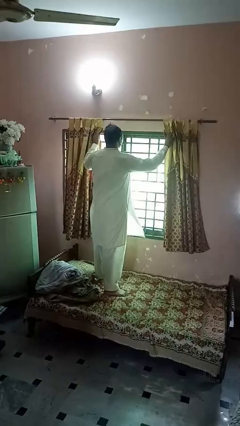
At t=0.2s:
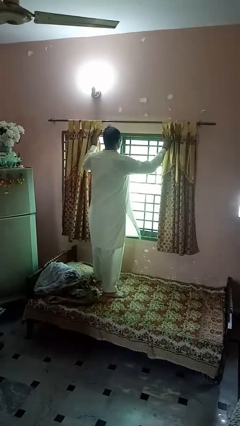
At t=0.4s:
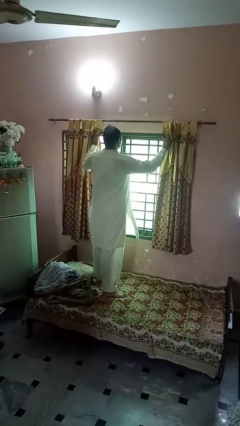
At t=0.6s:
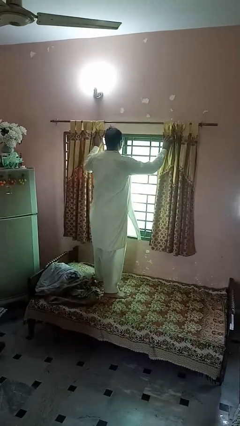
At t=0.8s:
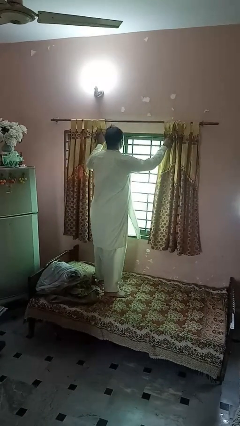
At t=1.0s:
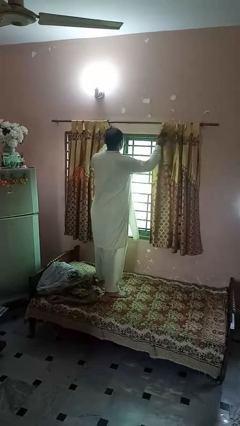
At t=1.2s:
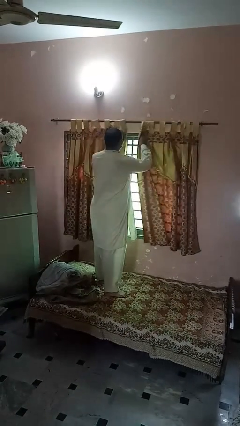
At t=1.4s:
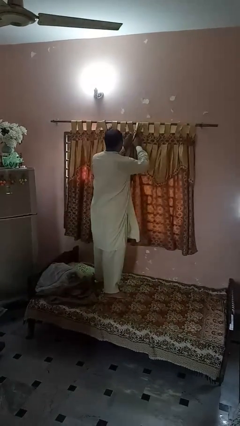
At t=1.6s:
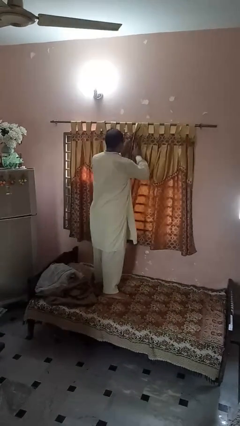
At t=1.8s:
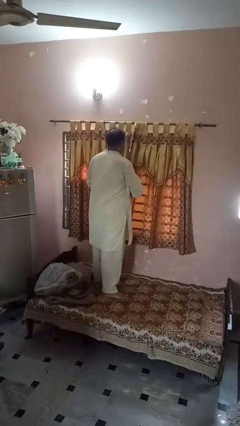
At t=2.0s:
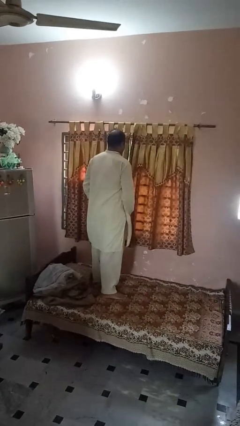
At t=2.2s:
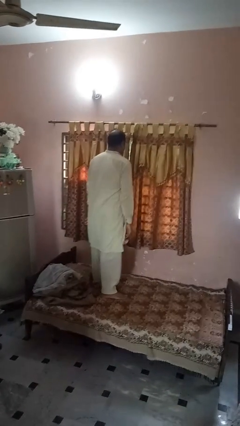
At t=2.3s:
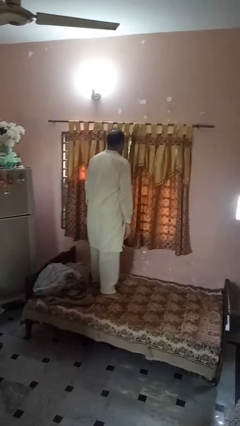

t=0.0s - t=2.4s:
person closes curtains

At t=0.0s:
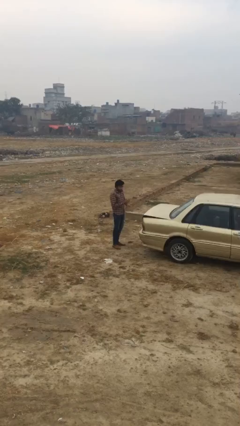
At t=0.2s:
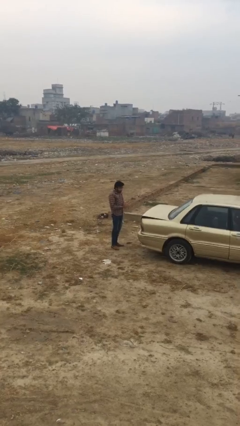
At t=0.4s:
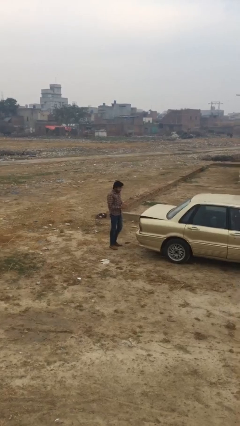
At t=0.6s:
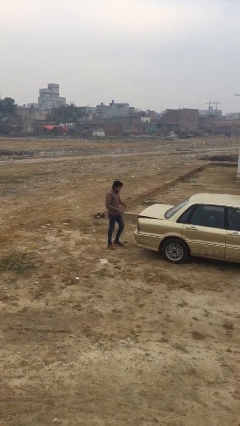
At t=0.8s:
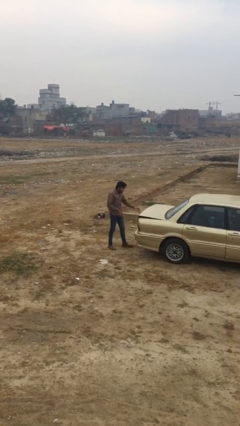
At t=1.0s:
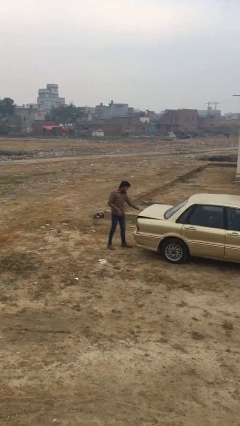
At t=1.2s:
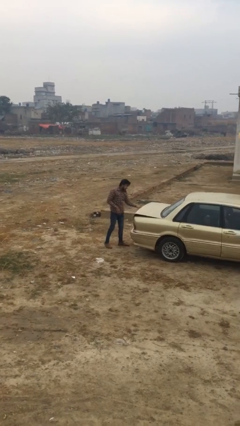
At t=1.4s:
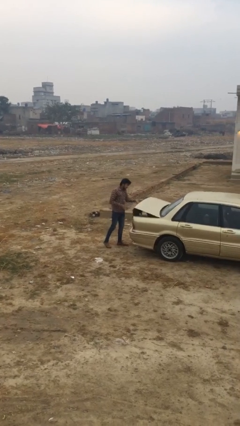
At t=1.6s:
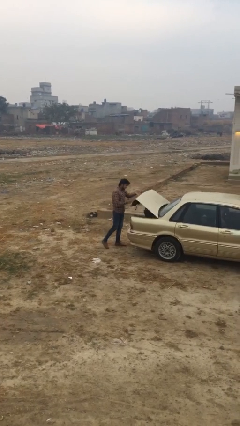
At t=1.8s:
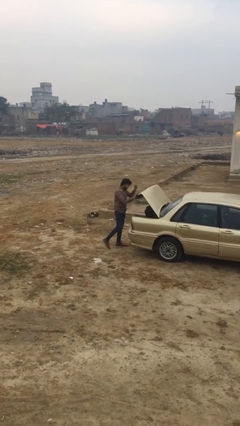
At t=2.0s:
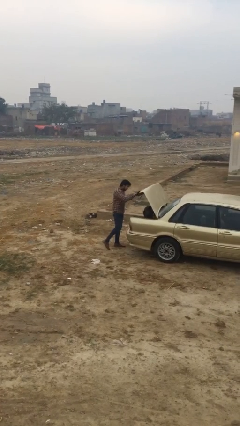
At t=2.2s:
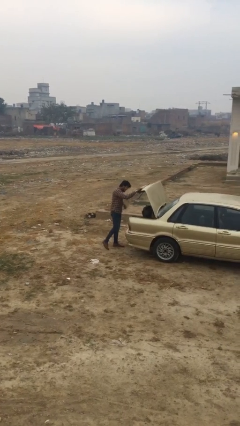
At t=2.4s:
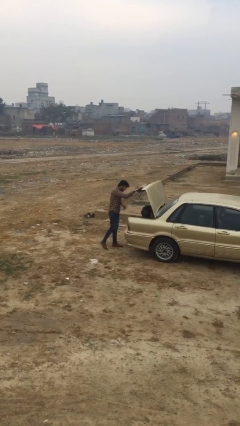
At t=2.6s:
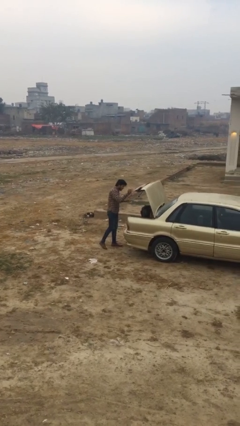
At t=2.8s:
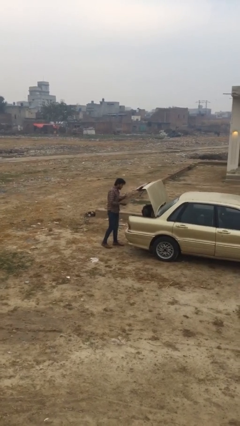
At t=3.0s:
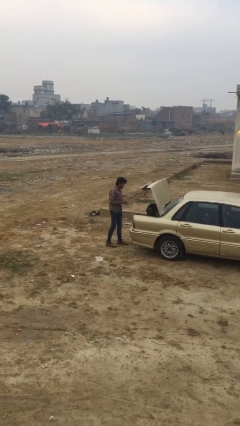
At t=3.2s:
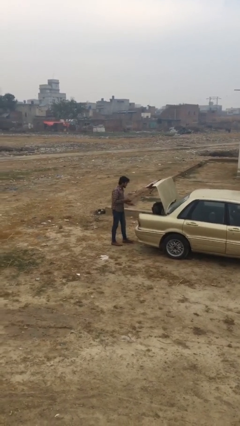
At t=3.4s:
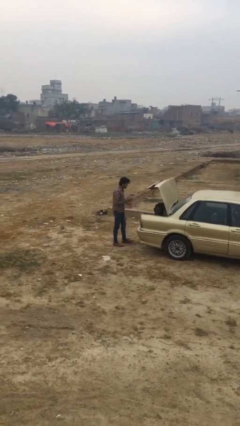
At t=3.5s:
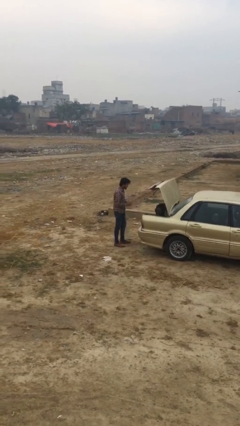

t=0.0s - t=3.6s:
person opens car trunk

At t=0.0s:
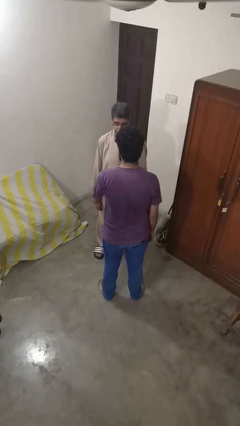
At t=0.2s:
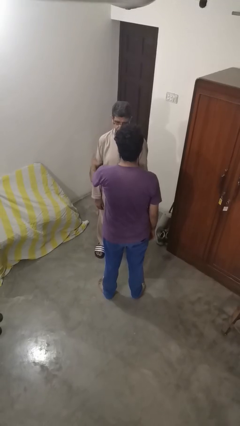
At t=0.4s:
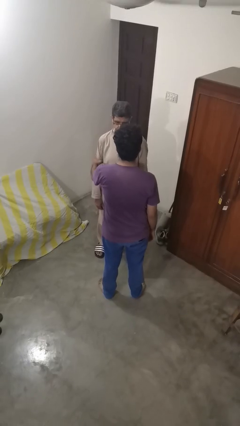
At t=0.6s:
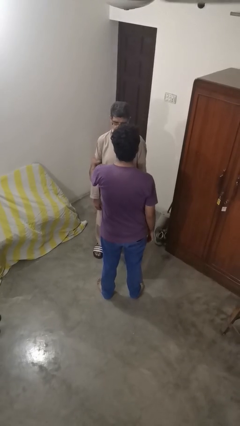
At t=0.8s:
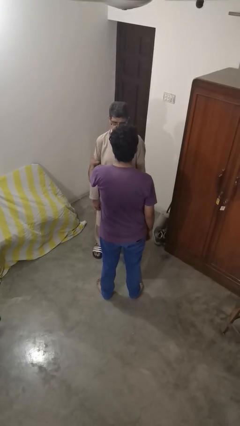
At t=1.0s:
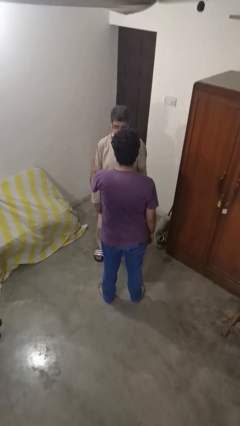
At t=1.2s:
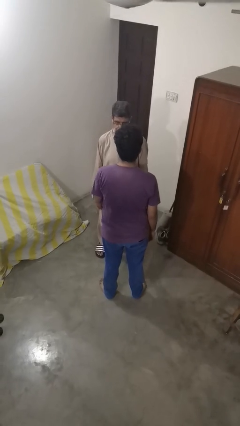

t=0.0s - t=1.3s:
person grabs person by bicep

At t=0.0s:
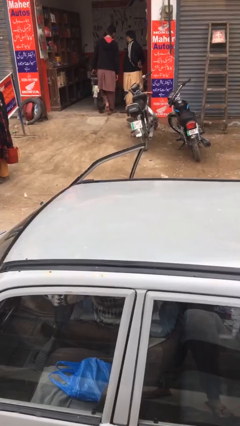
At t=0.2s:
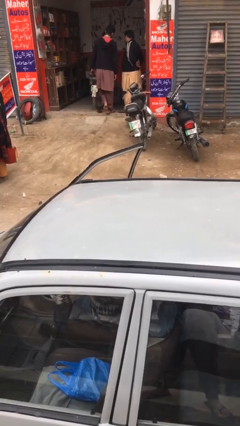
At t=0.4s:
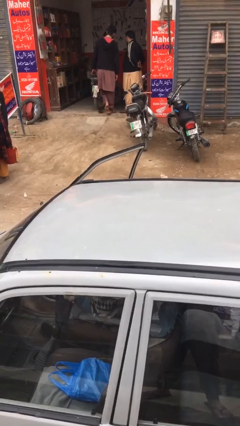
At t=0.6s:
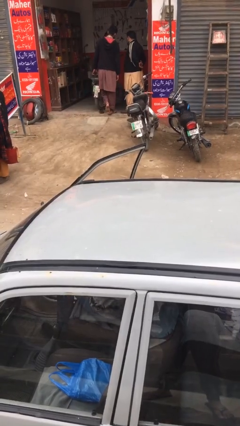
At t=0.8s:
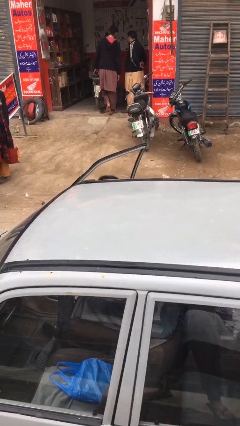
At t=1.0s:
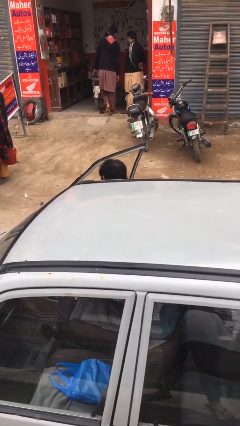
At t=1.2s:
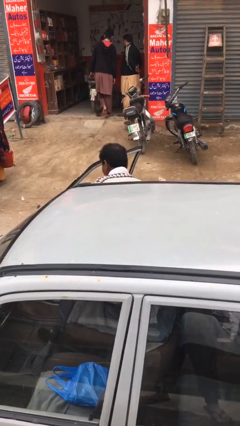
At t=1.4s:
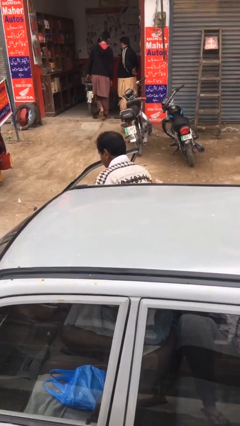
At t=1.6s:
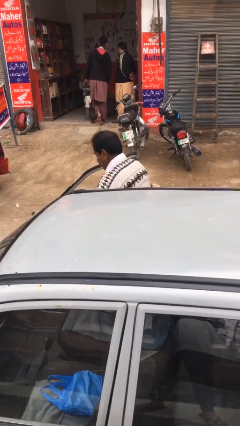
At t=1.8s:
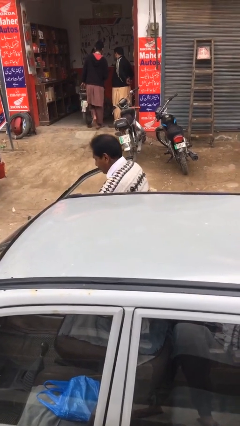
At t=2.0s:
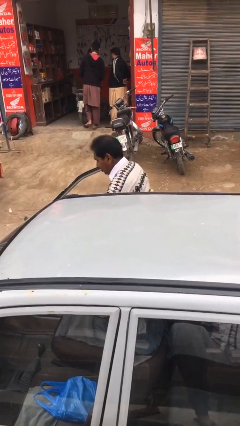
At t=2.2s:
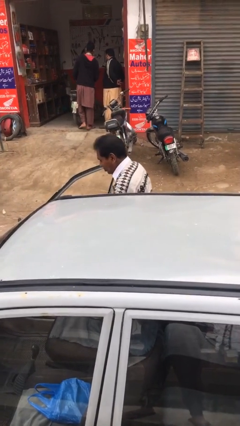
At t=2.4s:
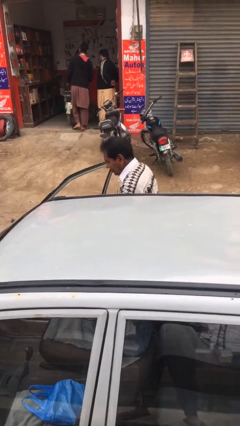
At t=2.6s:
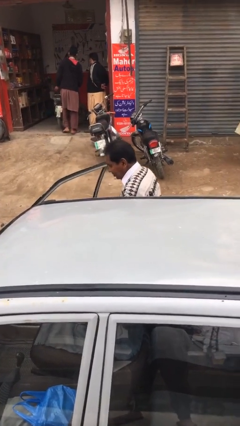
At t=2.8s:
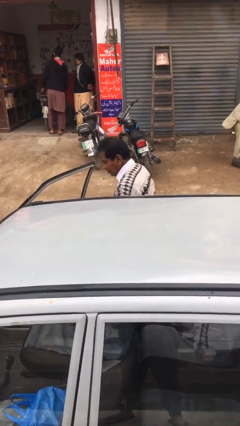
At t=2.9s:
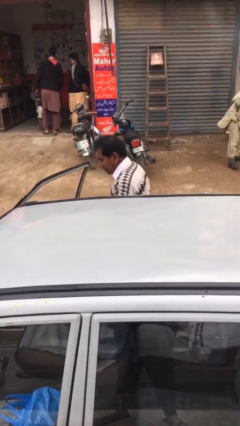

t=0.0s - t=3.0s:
person exits car

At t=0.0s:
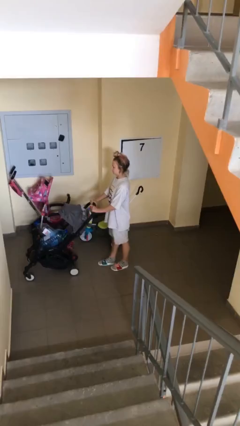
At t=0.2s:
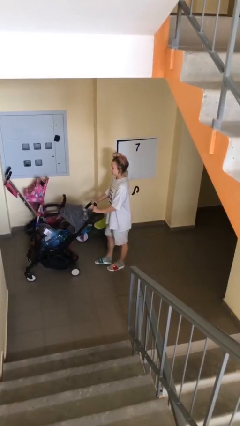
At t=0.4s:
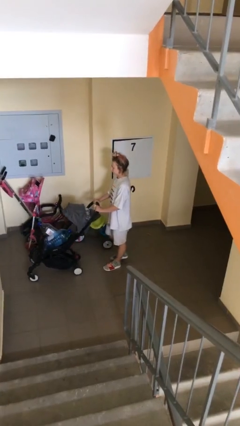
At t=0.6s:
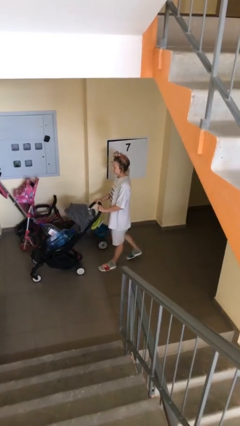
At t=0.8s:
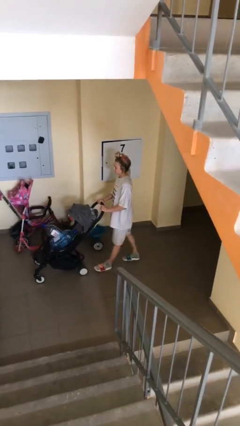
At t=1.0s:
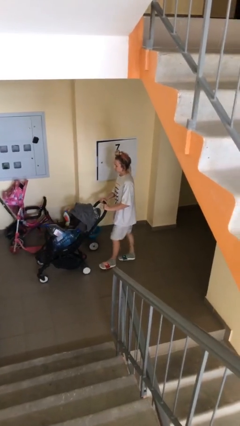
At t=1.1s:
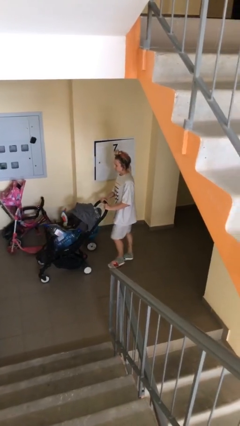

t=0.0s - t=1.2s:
person pulls wheeled cart

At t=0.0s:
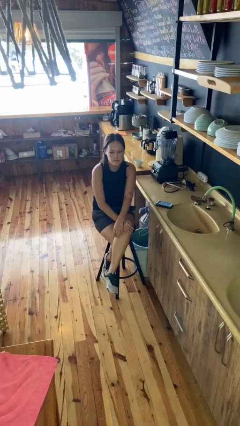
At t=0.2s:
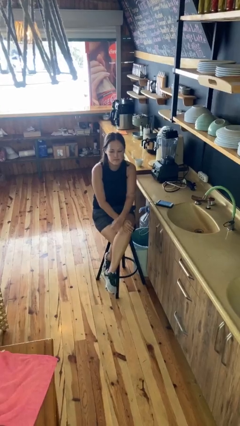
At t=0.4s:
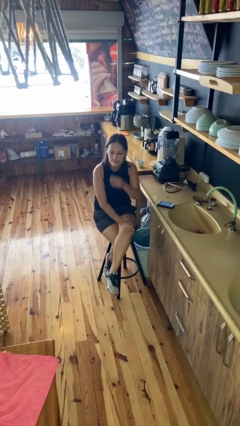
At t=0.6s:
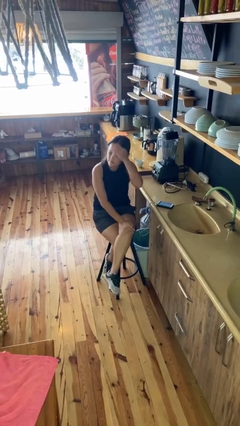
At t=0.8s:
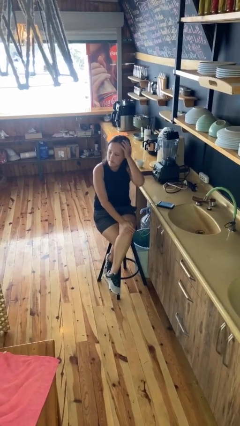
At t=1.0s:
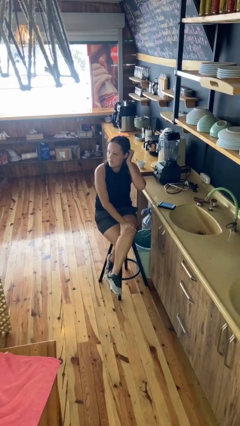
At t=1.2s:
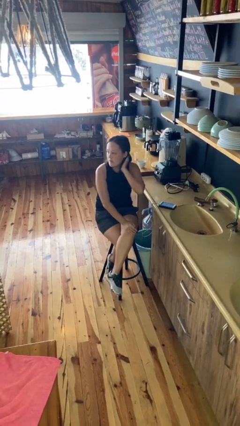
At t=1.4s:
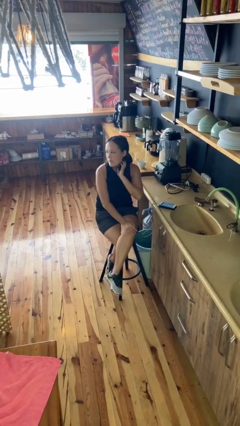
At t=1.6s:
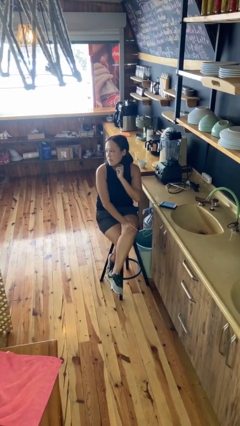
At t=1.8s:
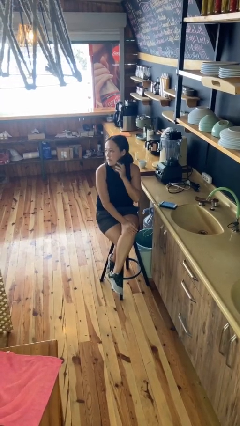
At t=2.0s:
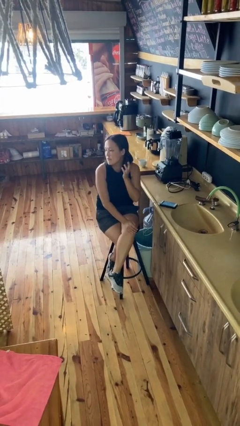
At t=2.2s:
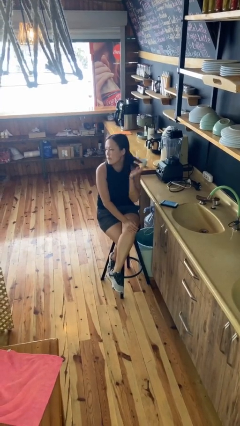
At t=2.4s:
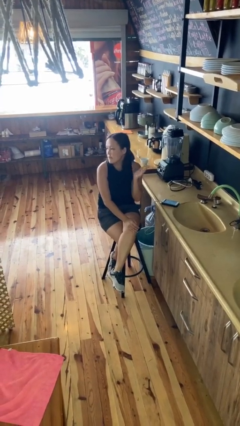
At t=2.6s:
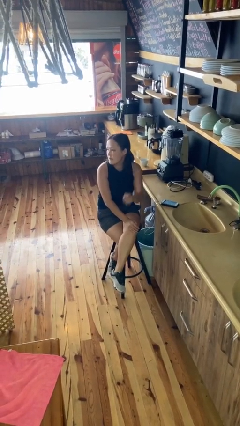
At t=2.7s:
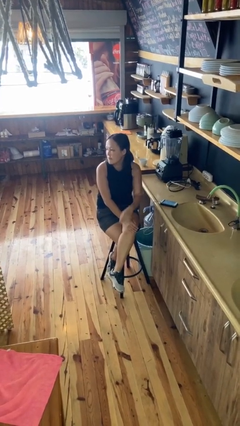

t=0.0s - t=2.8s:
person strokes hair

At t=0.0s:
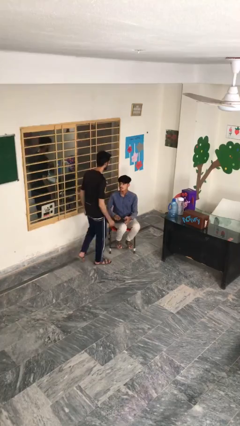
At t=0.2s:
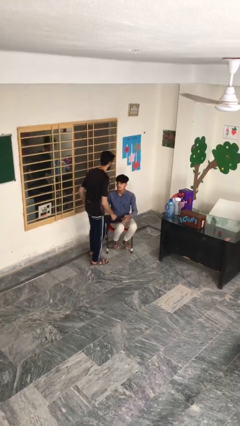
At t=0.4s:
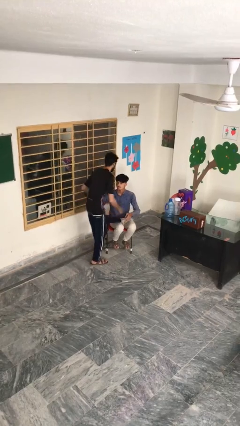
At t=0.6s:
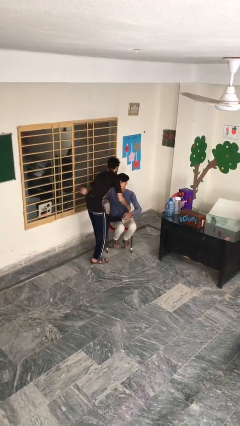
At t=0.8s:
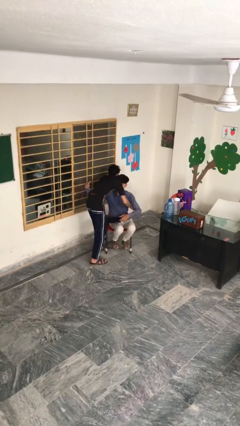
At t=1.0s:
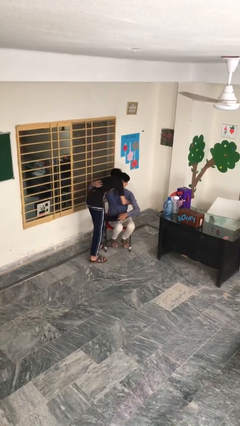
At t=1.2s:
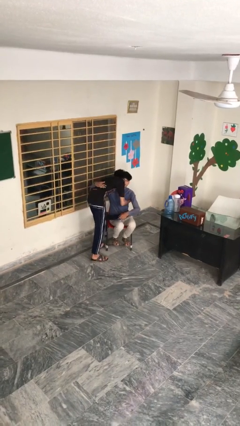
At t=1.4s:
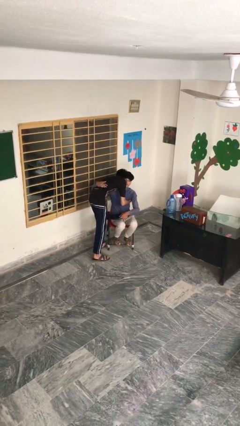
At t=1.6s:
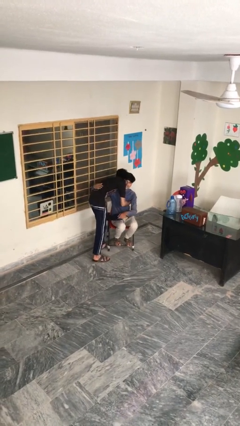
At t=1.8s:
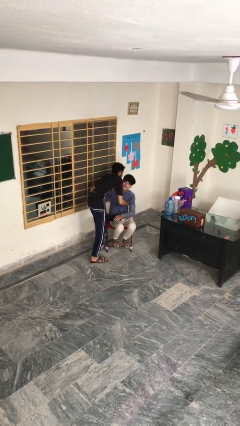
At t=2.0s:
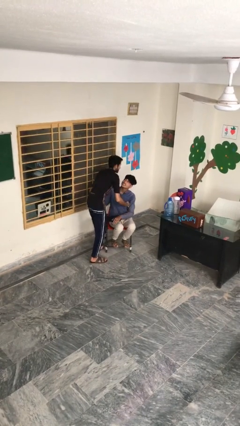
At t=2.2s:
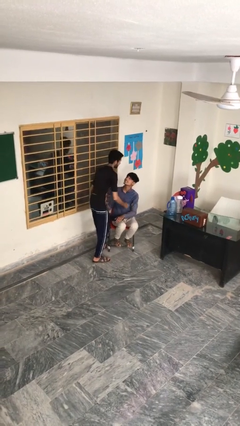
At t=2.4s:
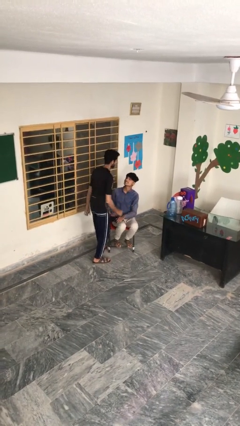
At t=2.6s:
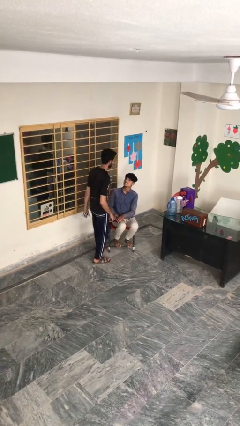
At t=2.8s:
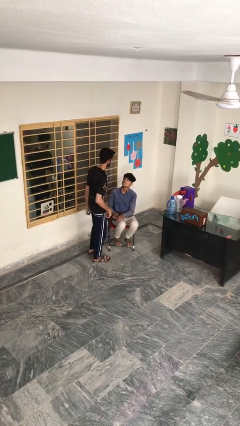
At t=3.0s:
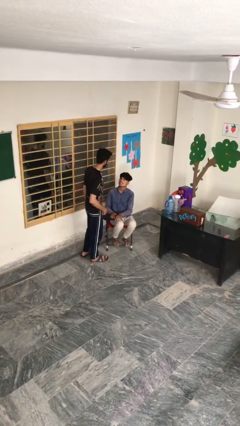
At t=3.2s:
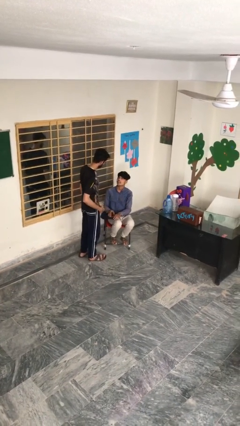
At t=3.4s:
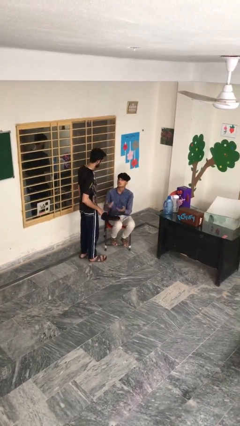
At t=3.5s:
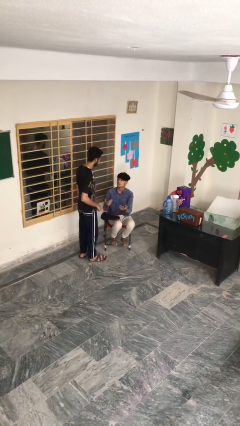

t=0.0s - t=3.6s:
person embraces person
